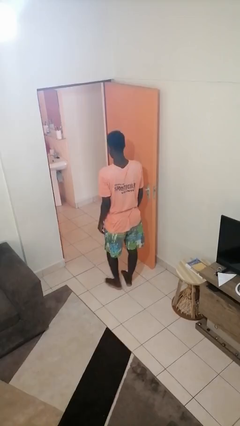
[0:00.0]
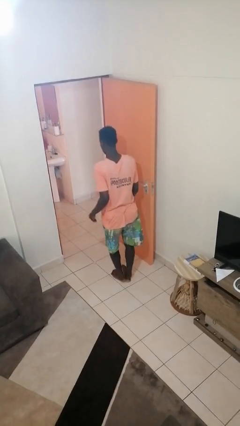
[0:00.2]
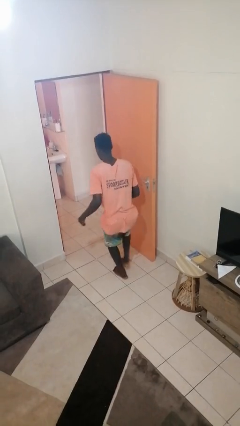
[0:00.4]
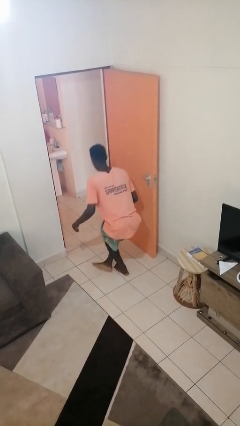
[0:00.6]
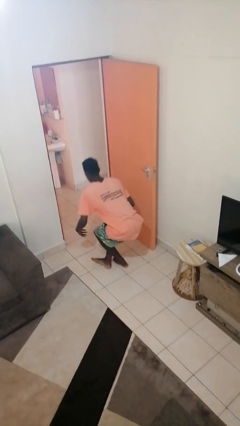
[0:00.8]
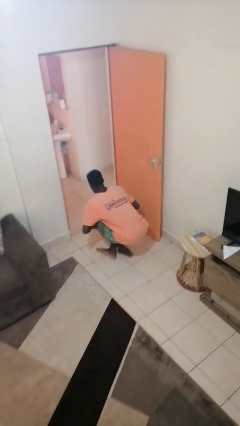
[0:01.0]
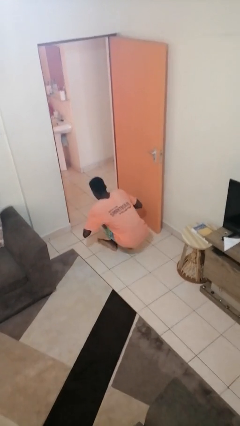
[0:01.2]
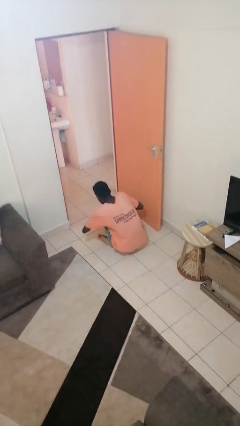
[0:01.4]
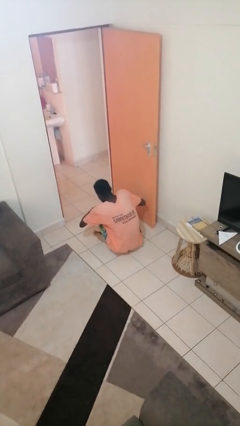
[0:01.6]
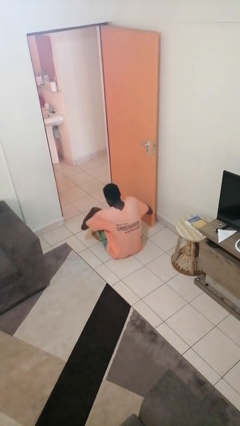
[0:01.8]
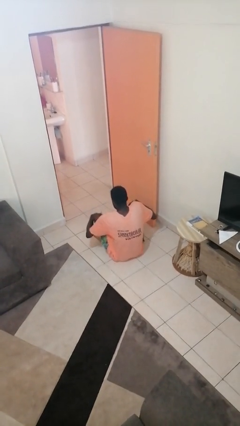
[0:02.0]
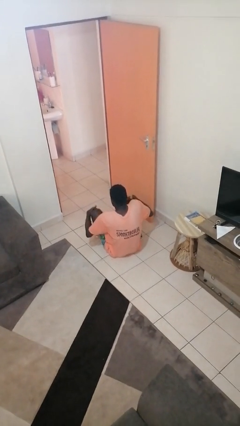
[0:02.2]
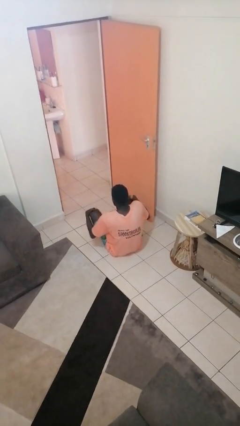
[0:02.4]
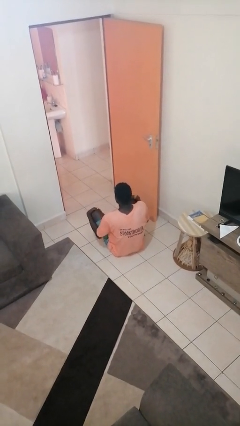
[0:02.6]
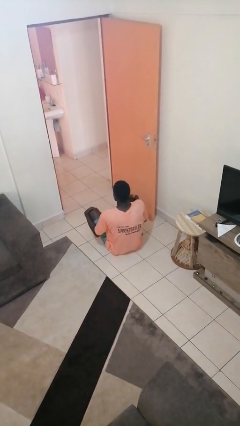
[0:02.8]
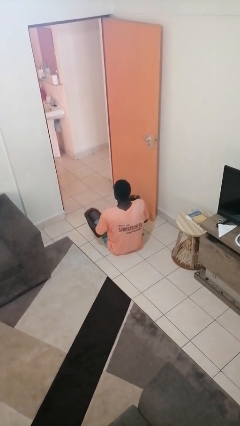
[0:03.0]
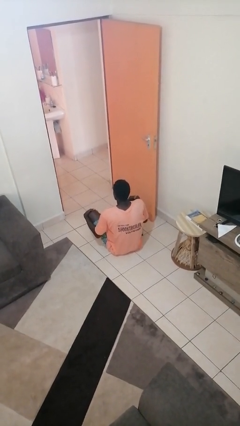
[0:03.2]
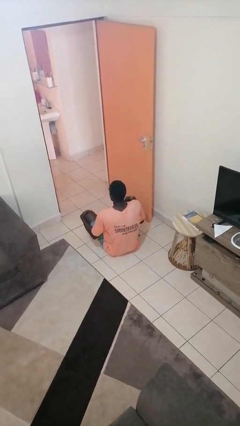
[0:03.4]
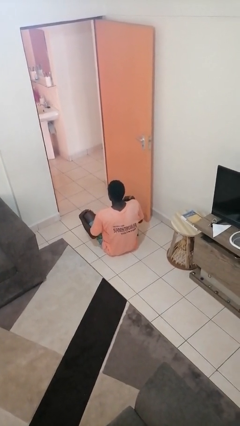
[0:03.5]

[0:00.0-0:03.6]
person sits crisscross

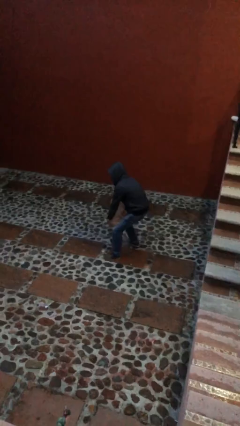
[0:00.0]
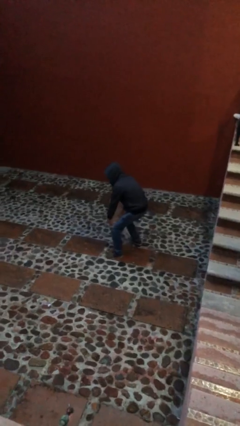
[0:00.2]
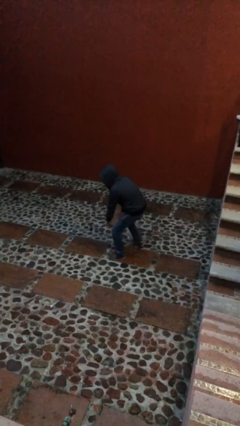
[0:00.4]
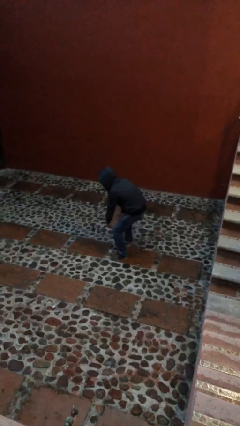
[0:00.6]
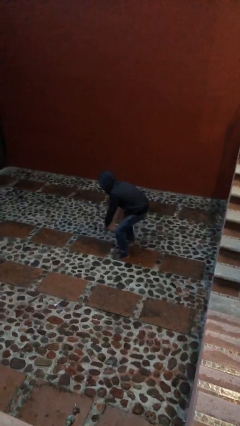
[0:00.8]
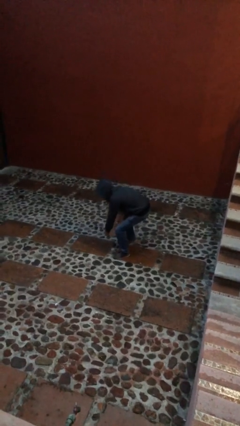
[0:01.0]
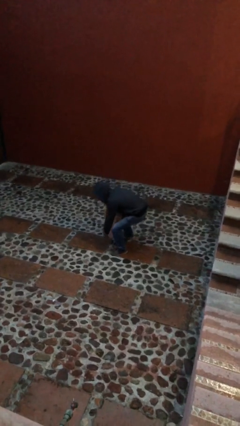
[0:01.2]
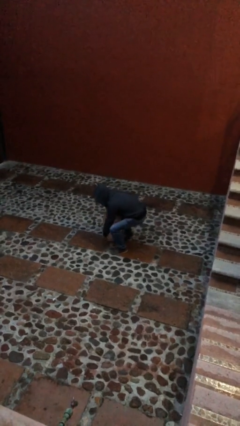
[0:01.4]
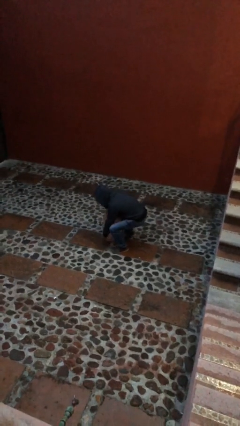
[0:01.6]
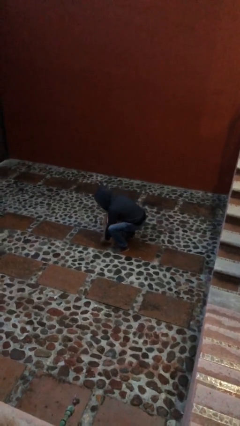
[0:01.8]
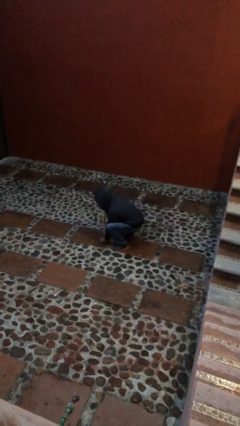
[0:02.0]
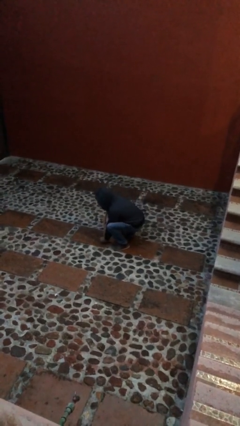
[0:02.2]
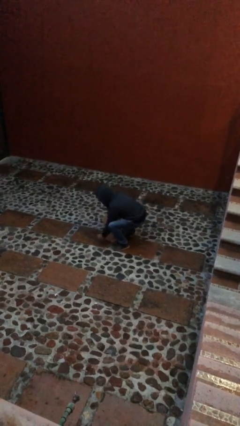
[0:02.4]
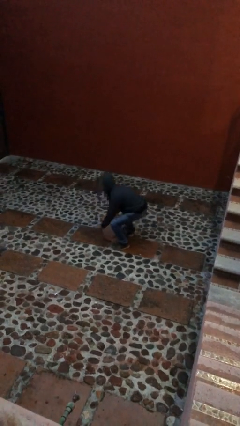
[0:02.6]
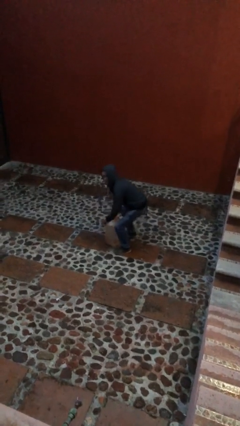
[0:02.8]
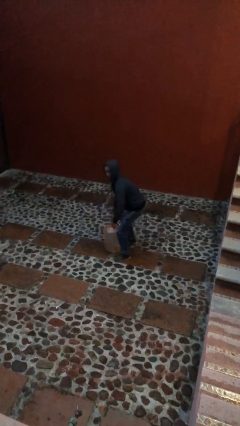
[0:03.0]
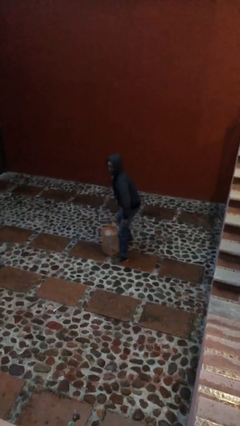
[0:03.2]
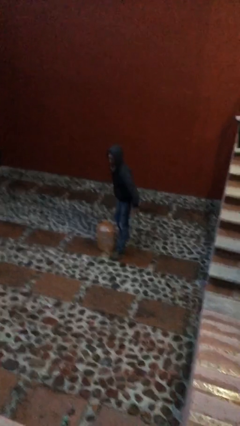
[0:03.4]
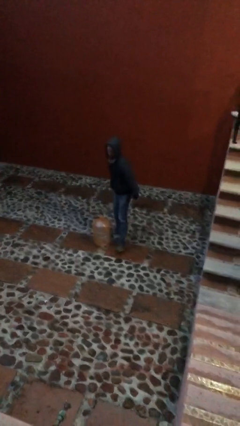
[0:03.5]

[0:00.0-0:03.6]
person puts down object on floor

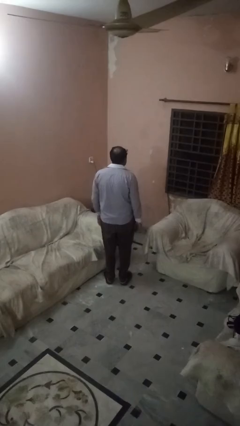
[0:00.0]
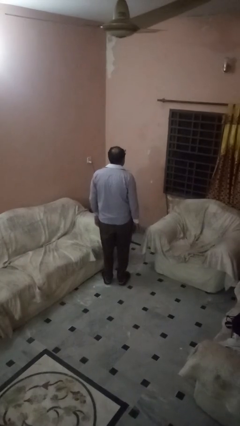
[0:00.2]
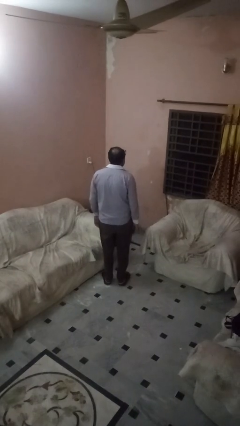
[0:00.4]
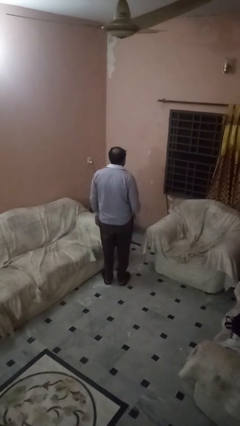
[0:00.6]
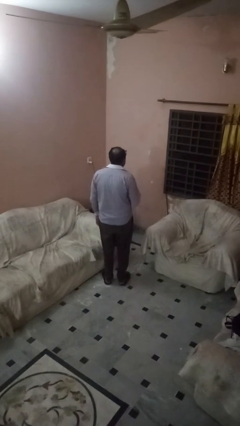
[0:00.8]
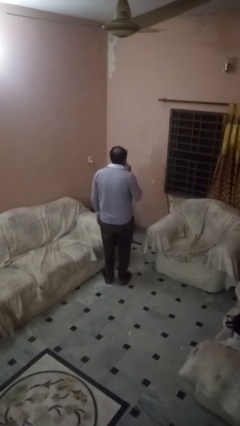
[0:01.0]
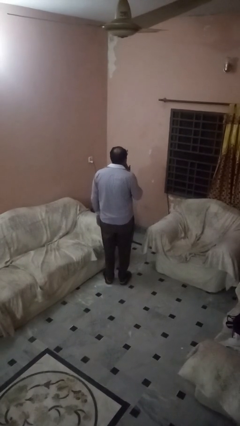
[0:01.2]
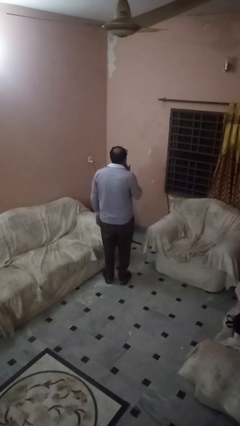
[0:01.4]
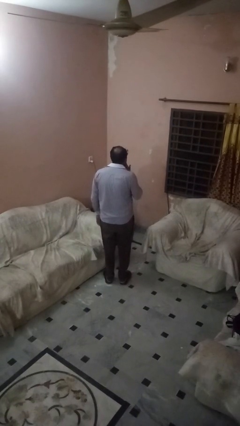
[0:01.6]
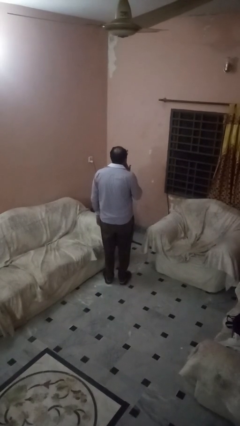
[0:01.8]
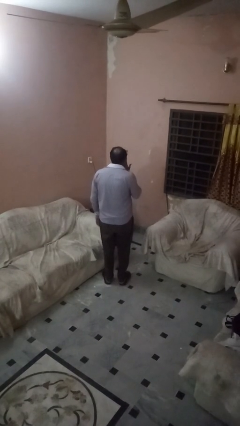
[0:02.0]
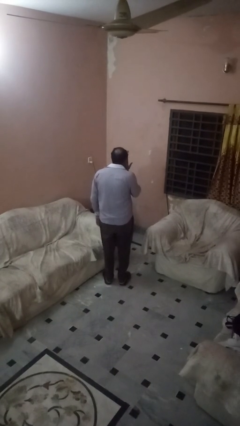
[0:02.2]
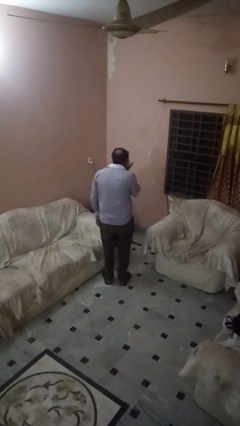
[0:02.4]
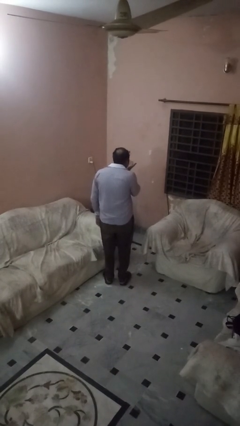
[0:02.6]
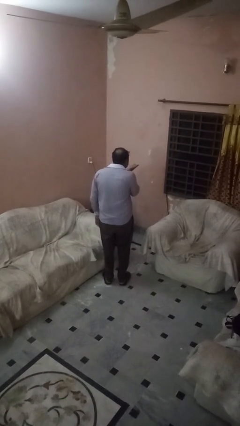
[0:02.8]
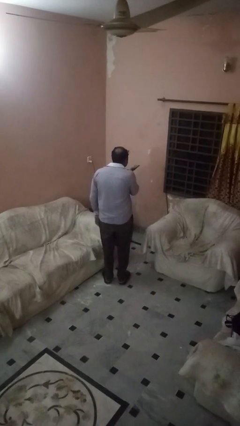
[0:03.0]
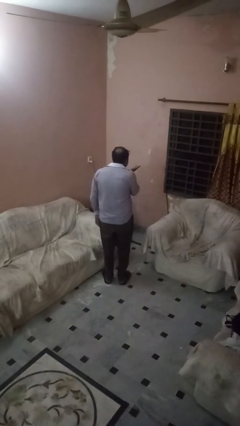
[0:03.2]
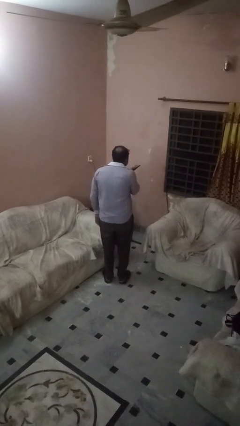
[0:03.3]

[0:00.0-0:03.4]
person gestures blow kiss

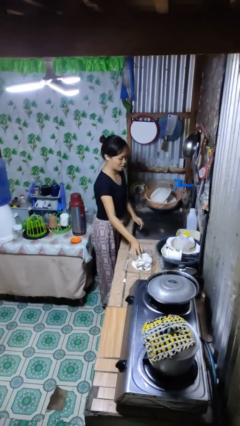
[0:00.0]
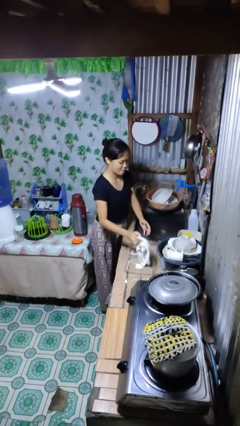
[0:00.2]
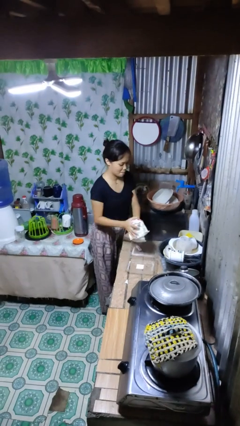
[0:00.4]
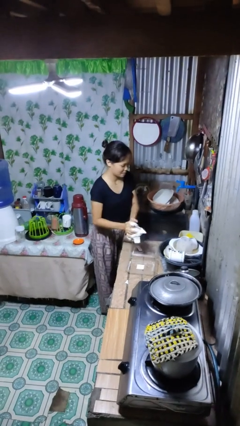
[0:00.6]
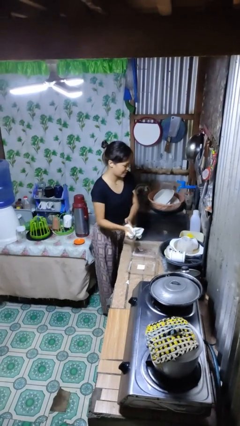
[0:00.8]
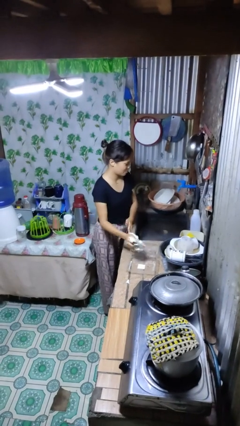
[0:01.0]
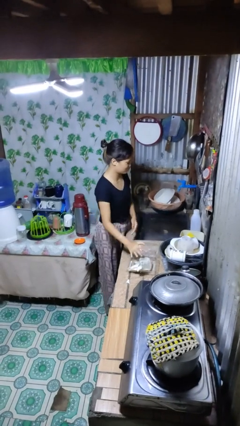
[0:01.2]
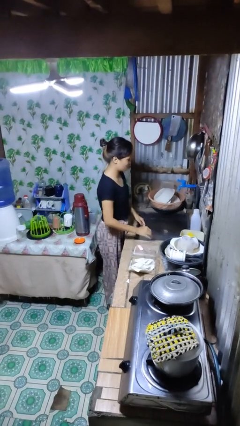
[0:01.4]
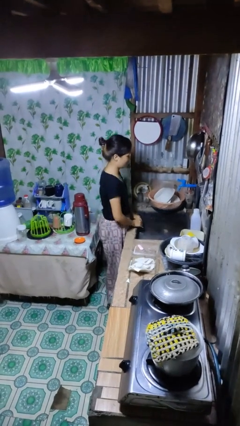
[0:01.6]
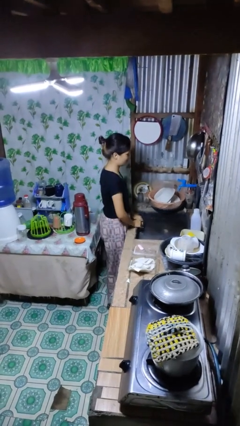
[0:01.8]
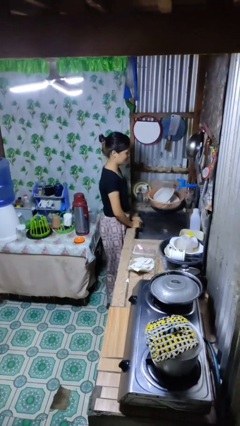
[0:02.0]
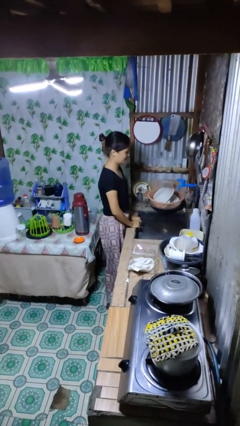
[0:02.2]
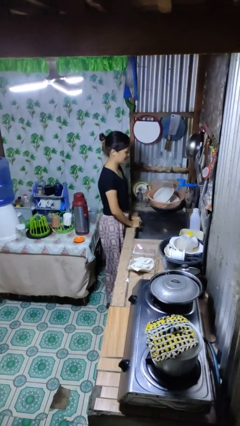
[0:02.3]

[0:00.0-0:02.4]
person dries hands with towel

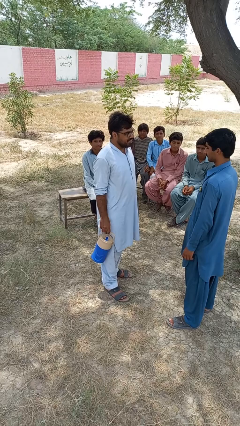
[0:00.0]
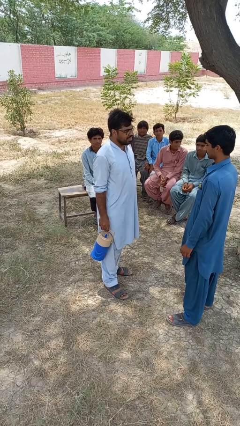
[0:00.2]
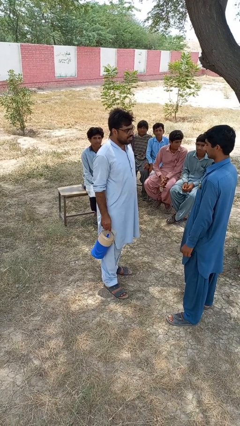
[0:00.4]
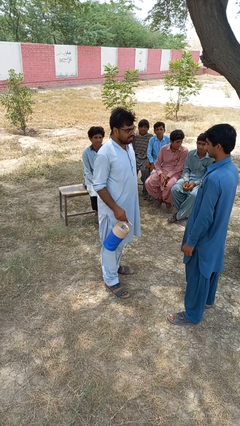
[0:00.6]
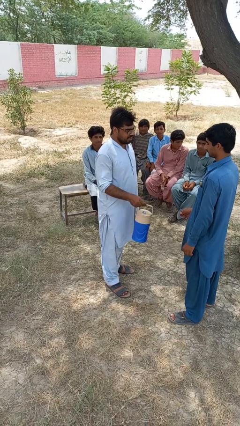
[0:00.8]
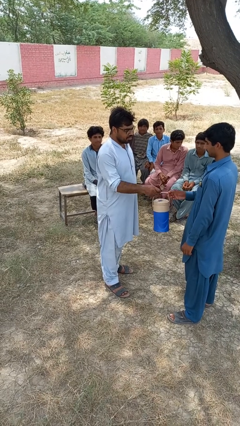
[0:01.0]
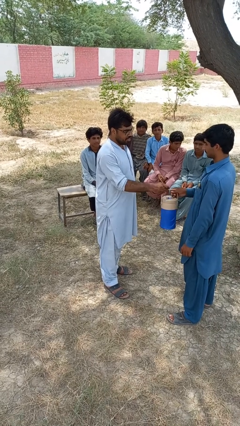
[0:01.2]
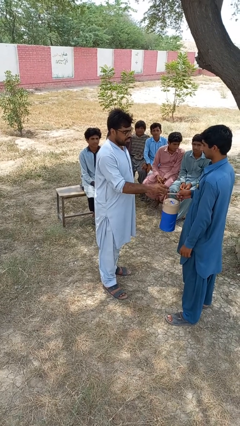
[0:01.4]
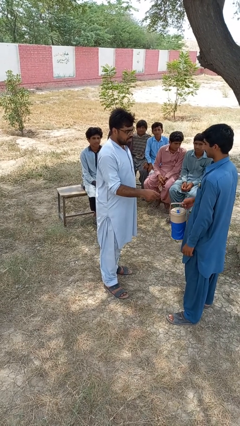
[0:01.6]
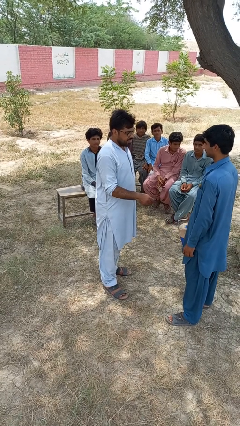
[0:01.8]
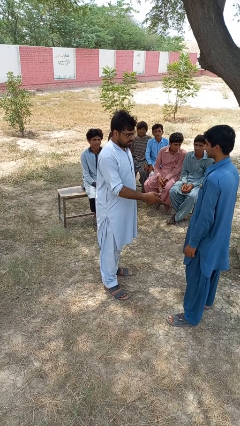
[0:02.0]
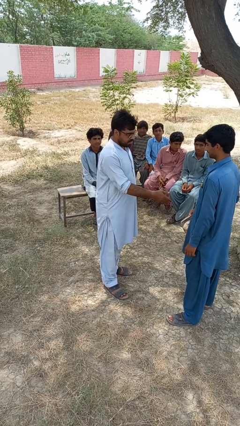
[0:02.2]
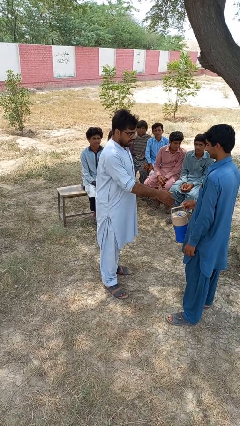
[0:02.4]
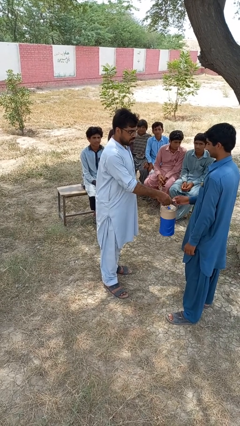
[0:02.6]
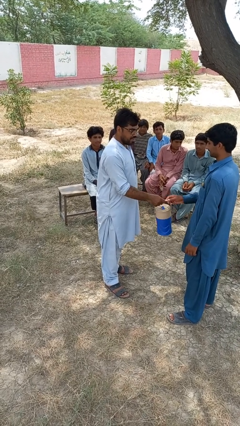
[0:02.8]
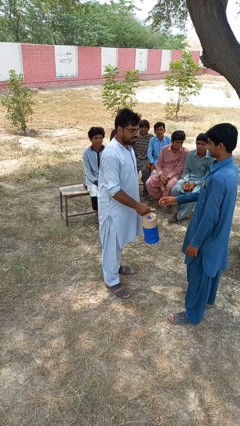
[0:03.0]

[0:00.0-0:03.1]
person transfers object to person

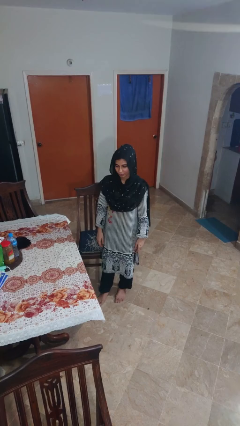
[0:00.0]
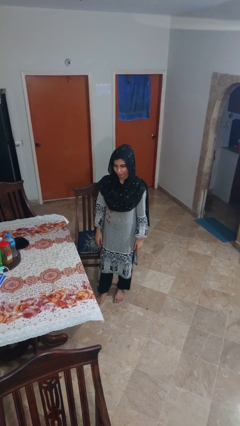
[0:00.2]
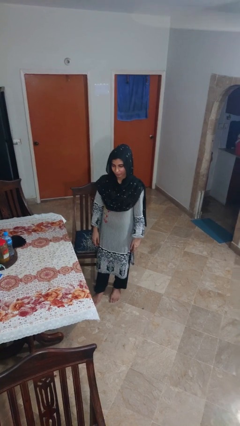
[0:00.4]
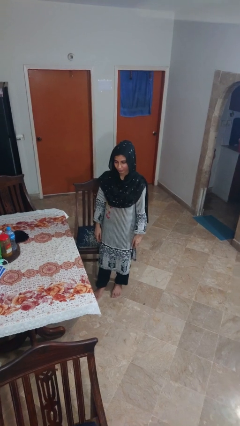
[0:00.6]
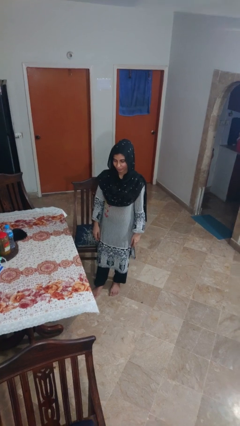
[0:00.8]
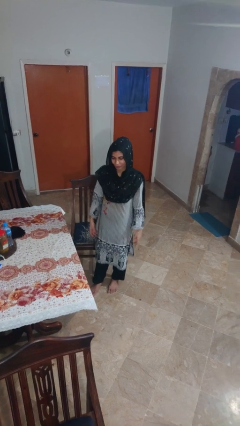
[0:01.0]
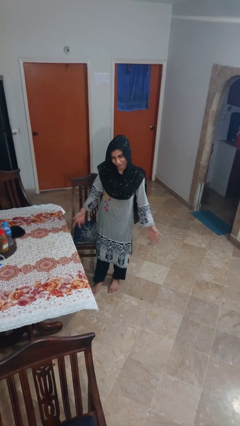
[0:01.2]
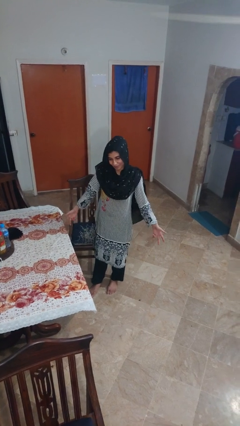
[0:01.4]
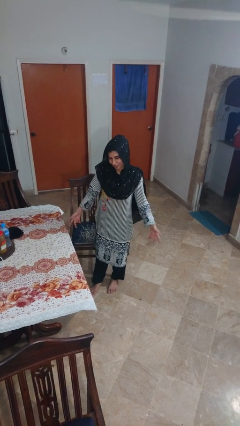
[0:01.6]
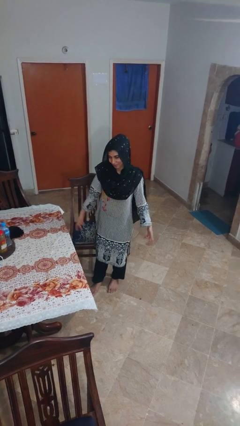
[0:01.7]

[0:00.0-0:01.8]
person shrugs
